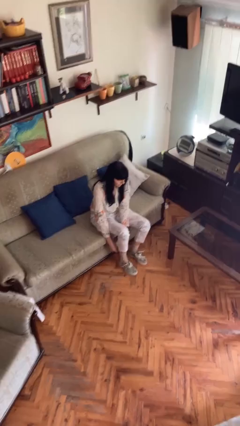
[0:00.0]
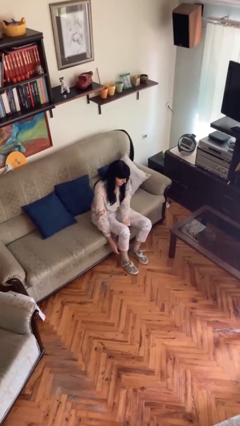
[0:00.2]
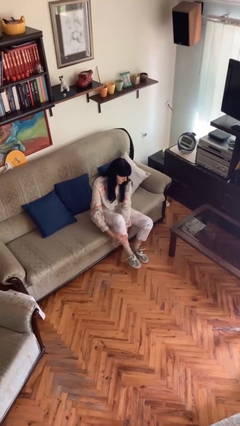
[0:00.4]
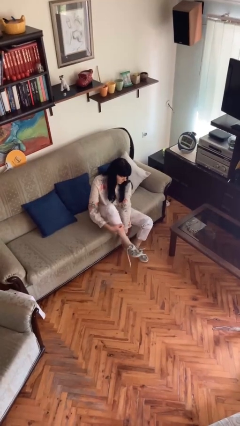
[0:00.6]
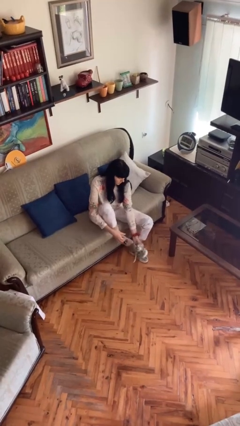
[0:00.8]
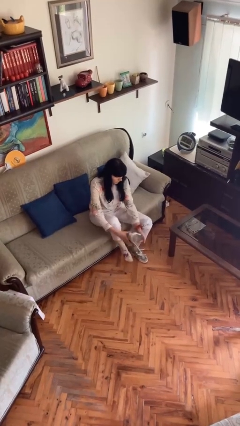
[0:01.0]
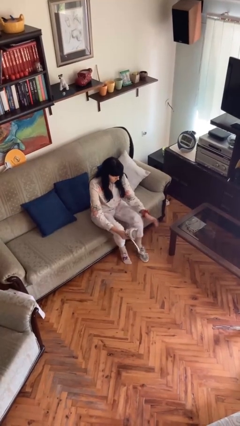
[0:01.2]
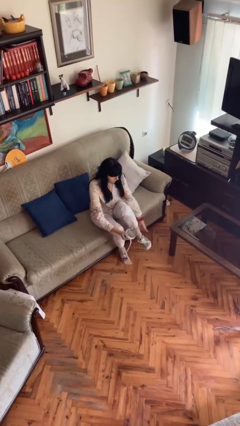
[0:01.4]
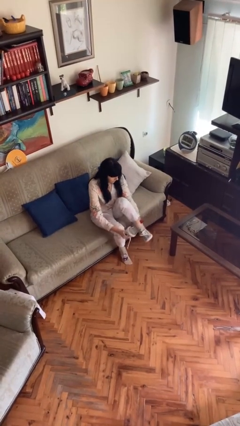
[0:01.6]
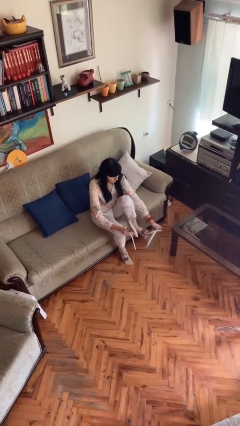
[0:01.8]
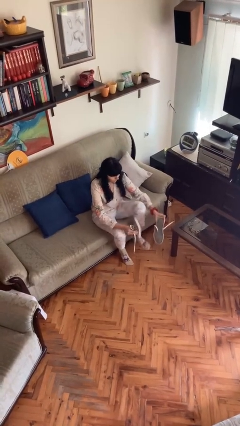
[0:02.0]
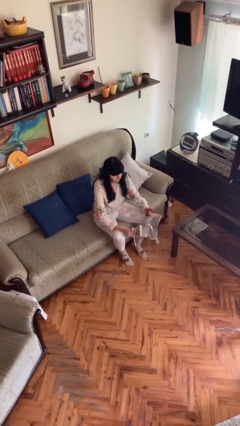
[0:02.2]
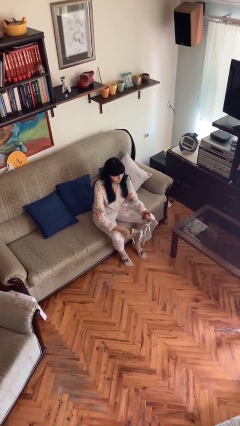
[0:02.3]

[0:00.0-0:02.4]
person takes off shoes

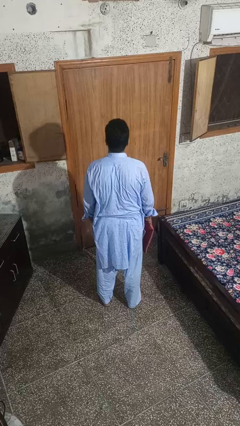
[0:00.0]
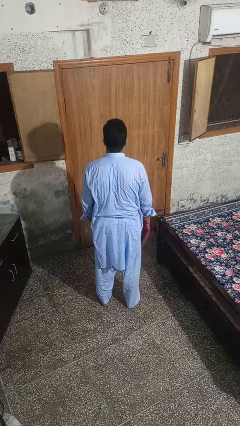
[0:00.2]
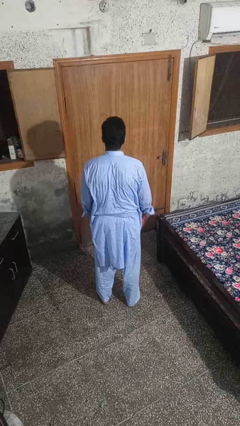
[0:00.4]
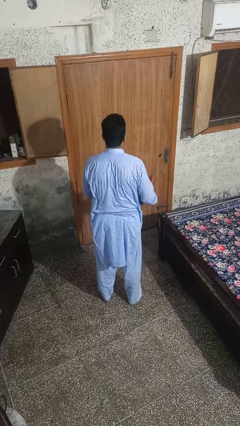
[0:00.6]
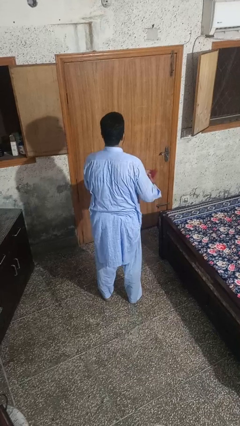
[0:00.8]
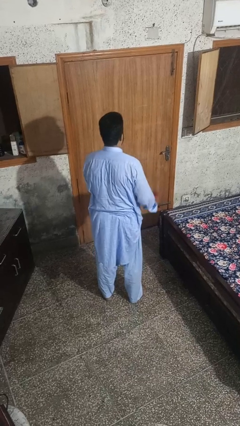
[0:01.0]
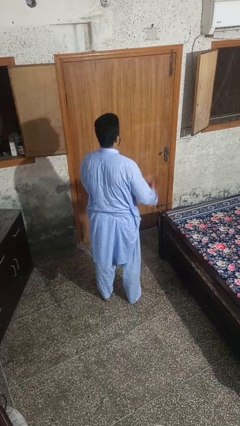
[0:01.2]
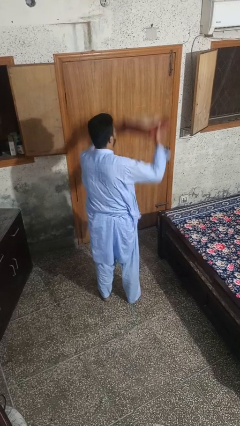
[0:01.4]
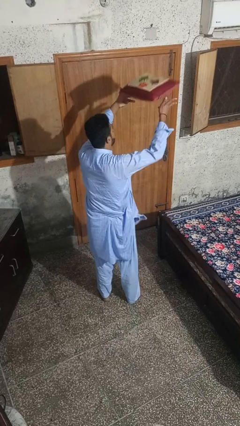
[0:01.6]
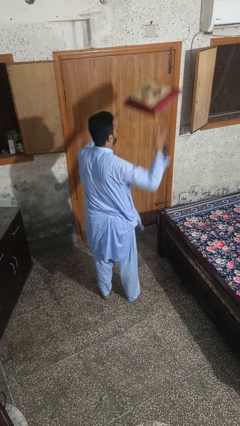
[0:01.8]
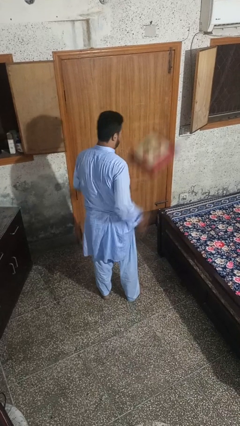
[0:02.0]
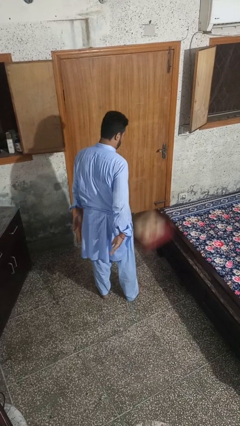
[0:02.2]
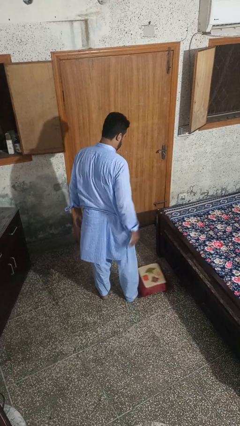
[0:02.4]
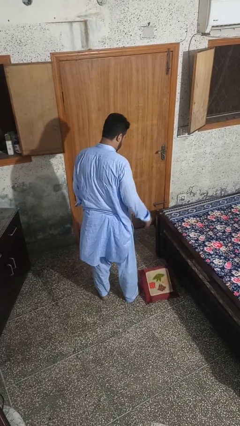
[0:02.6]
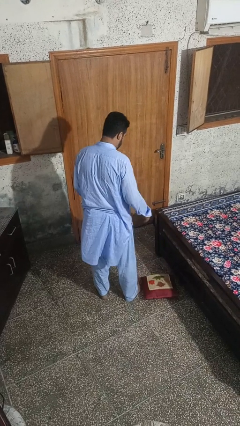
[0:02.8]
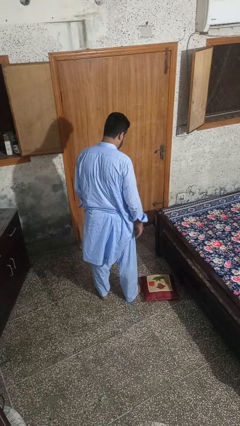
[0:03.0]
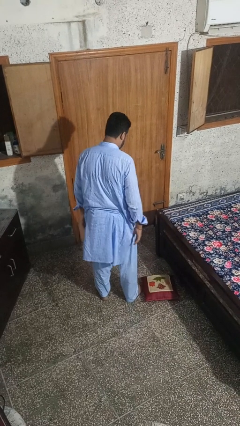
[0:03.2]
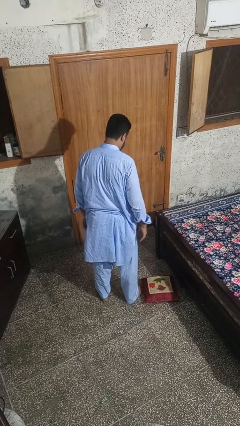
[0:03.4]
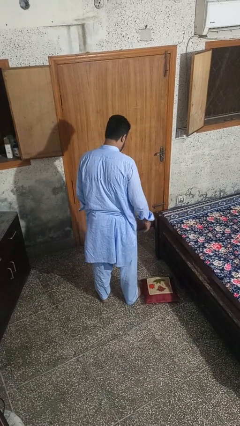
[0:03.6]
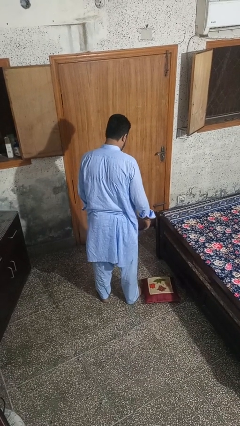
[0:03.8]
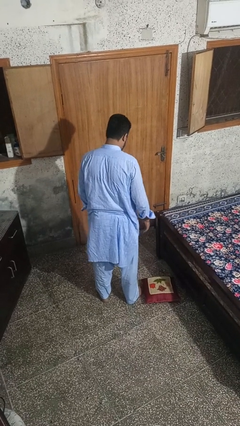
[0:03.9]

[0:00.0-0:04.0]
person throws object into air

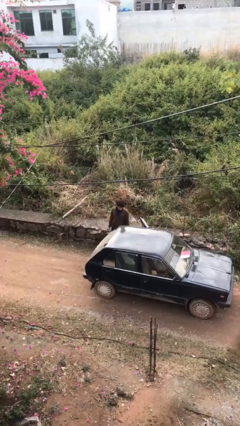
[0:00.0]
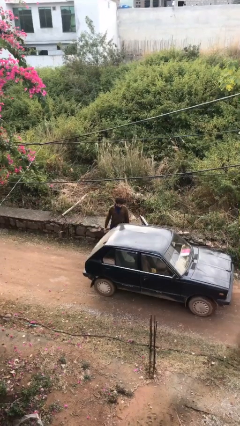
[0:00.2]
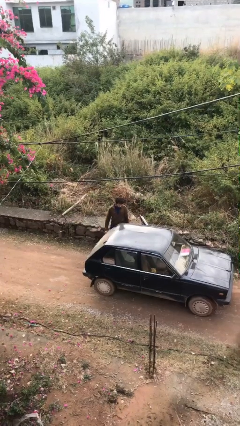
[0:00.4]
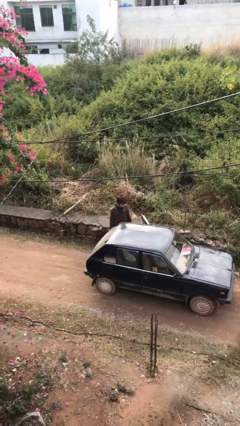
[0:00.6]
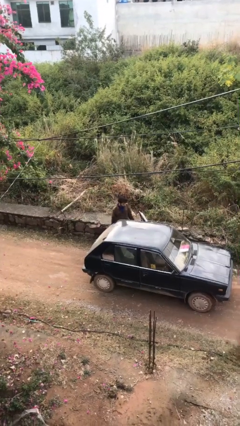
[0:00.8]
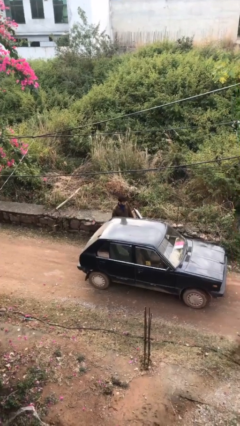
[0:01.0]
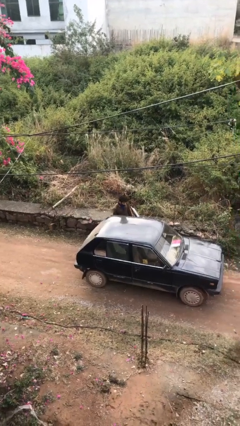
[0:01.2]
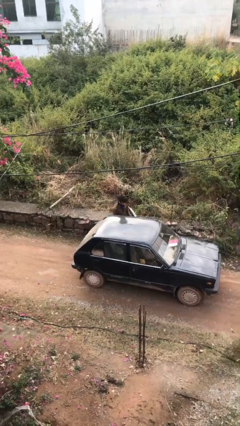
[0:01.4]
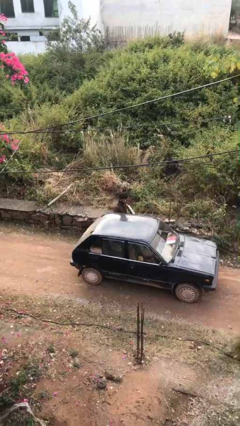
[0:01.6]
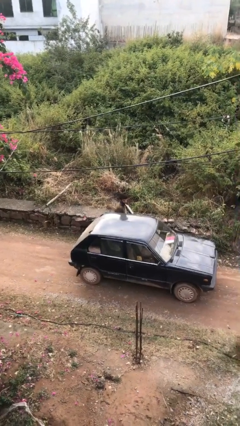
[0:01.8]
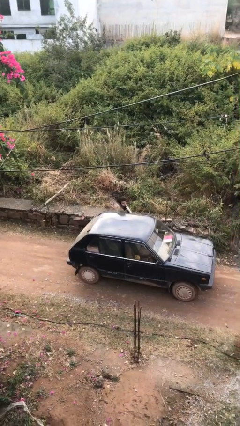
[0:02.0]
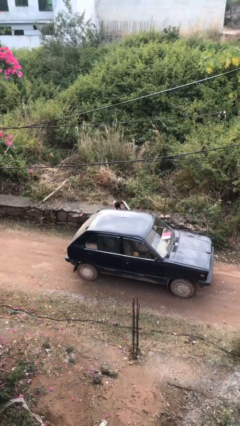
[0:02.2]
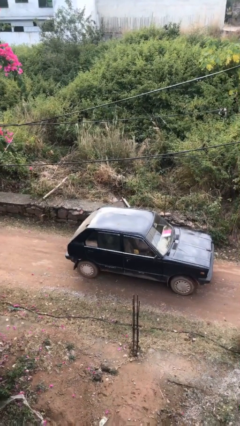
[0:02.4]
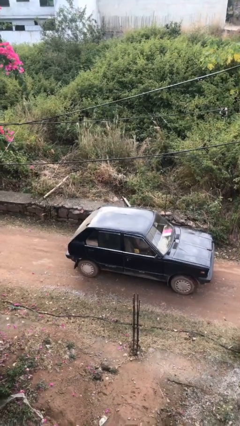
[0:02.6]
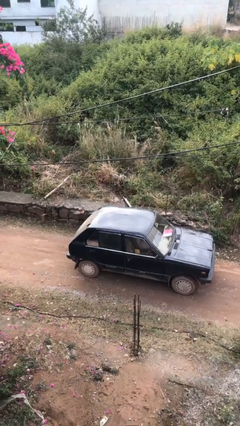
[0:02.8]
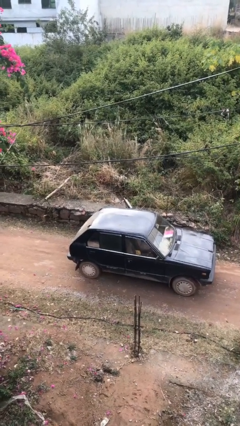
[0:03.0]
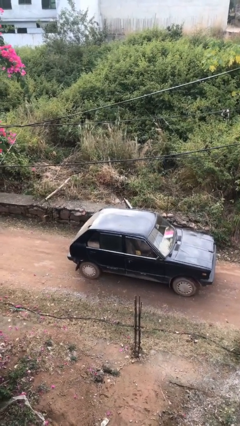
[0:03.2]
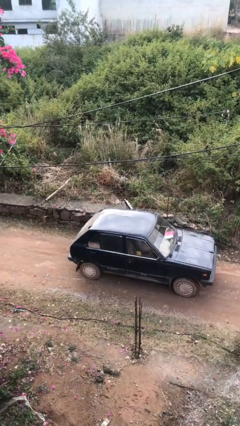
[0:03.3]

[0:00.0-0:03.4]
person enters car

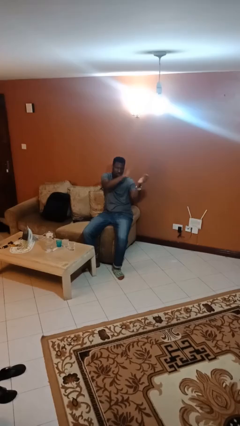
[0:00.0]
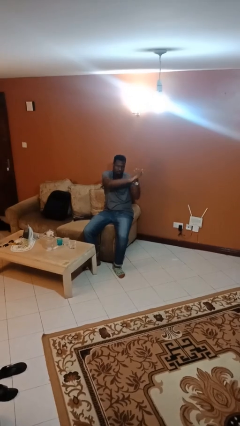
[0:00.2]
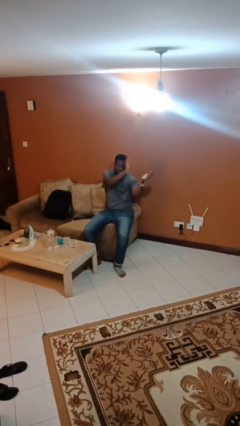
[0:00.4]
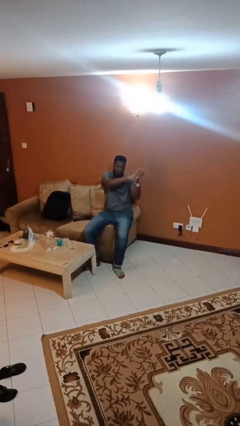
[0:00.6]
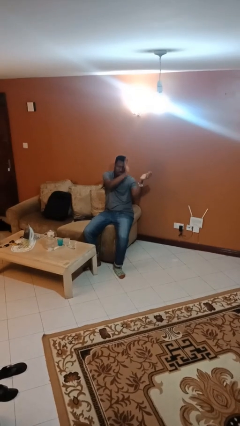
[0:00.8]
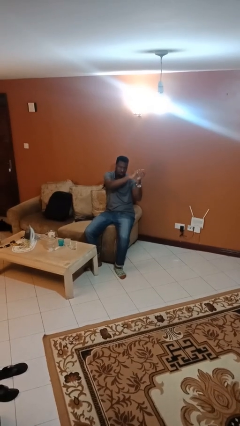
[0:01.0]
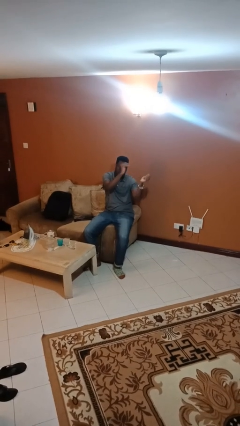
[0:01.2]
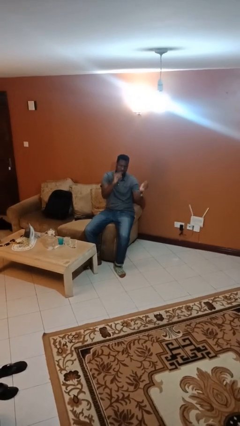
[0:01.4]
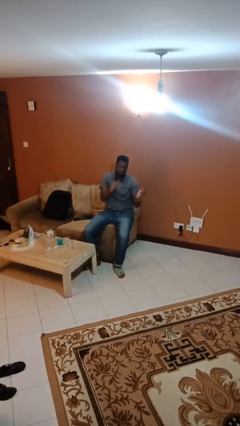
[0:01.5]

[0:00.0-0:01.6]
person claps hands

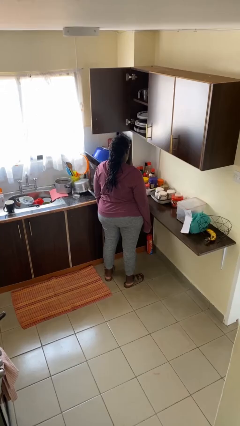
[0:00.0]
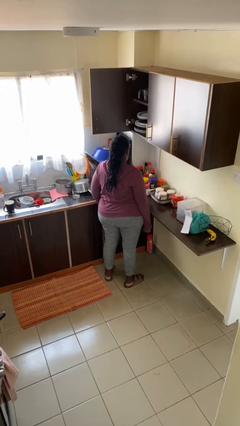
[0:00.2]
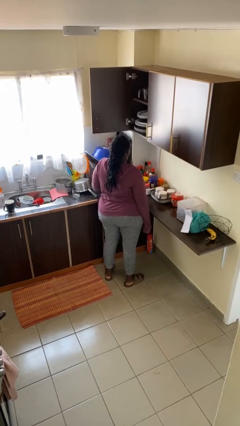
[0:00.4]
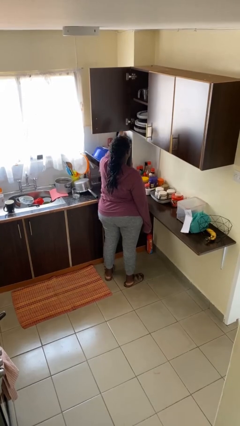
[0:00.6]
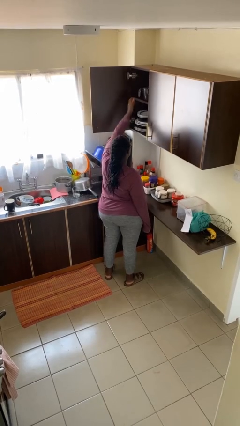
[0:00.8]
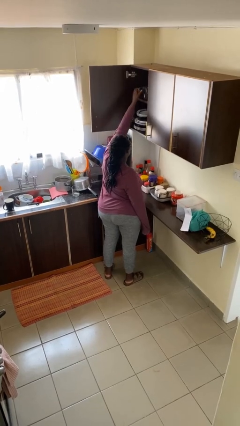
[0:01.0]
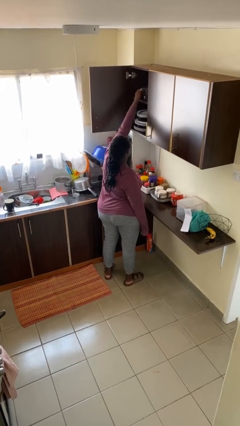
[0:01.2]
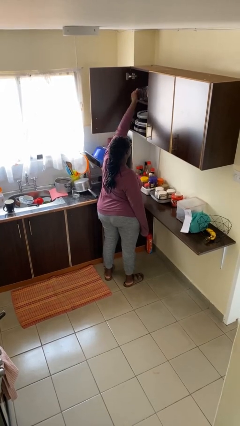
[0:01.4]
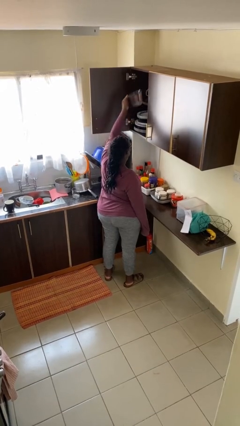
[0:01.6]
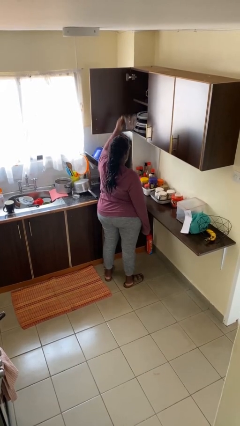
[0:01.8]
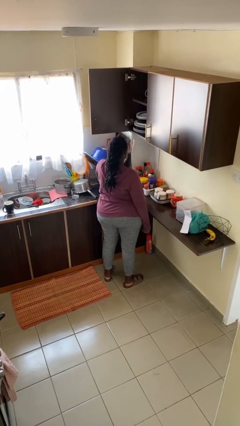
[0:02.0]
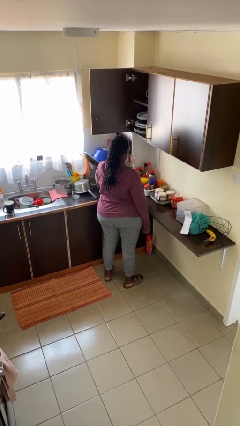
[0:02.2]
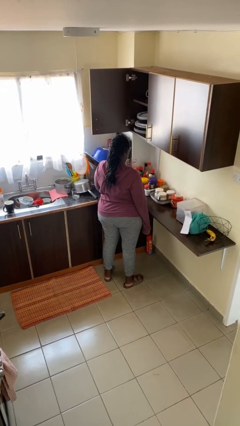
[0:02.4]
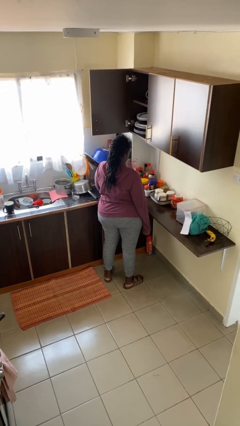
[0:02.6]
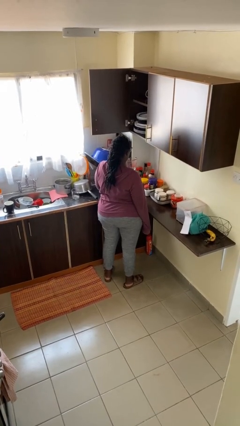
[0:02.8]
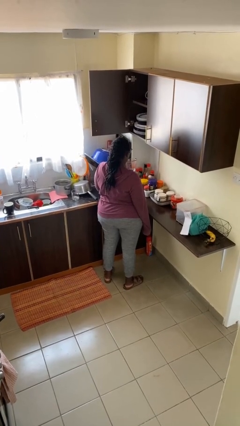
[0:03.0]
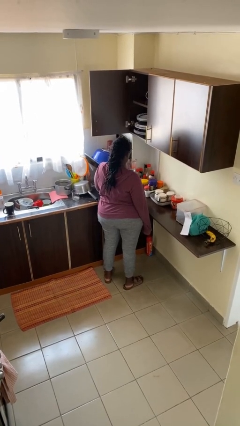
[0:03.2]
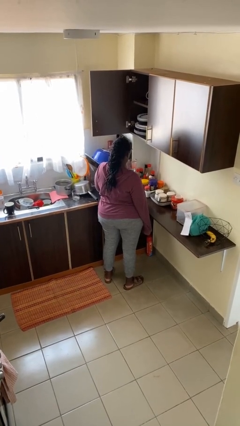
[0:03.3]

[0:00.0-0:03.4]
person picks up object from cabinet

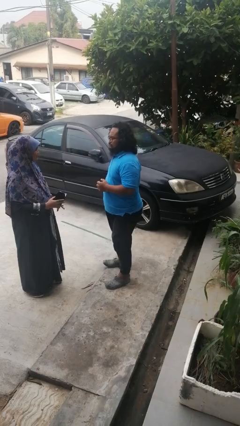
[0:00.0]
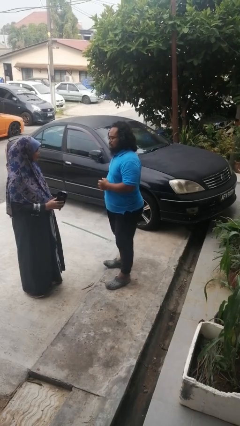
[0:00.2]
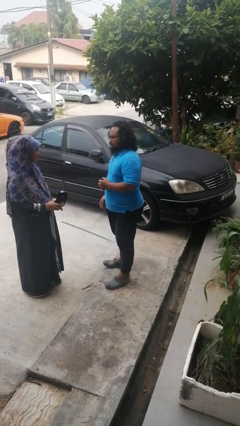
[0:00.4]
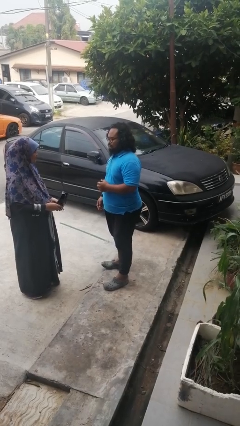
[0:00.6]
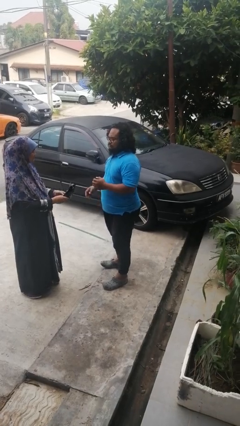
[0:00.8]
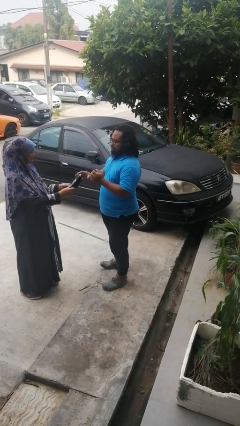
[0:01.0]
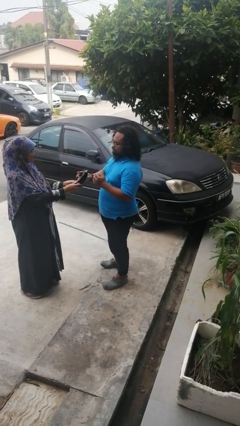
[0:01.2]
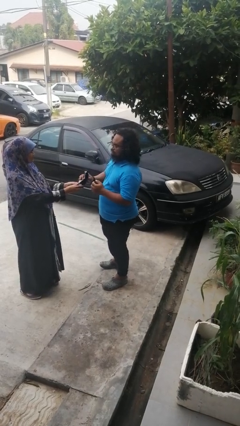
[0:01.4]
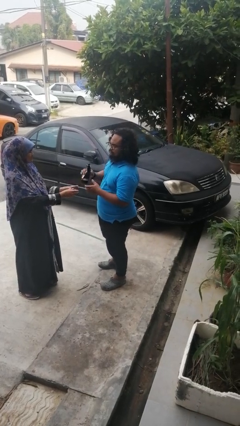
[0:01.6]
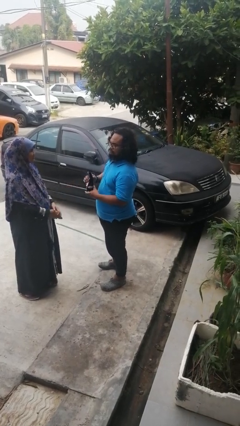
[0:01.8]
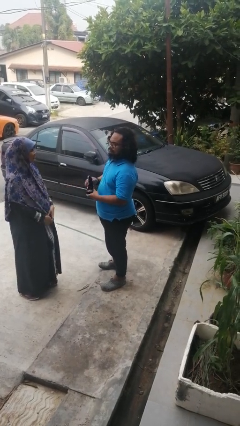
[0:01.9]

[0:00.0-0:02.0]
person transfers object to person

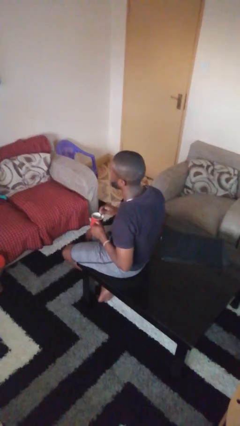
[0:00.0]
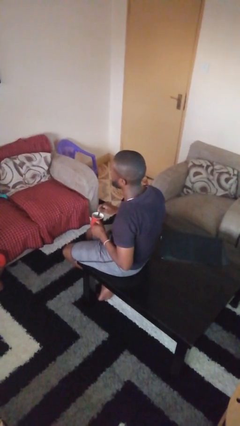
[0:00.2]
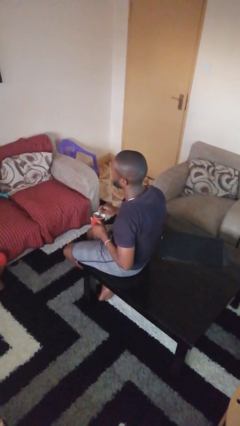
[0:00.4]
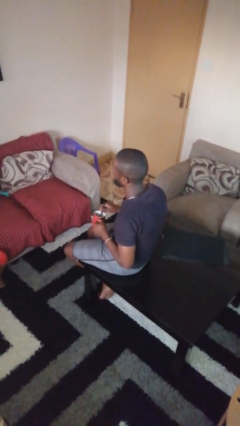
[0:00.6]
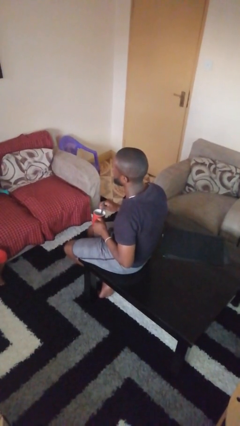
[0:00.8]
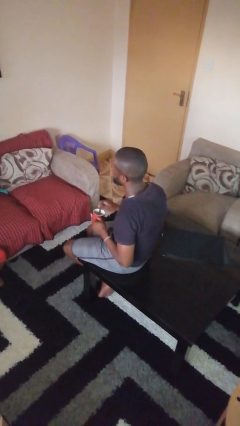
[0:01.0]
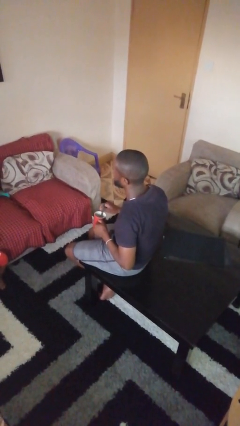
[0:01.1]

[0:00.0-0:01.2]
person stirs mug
